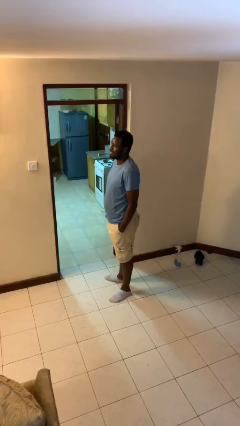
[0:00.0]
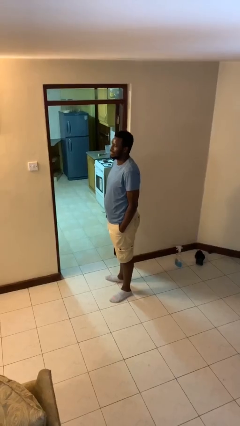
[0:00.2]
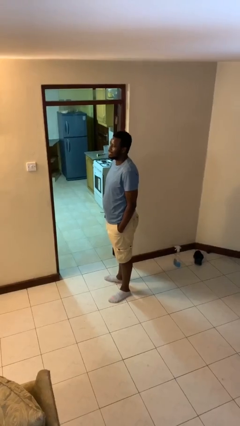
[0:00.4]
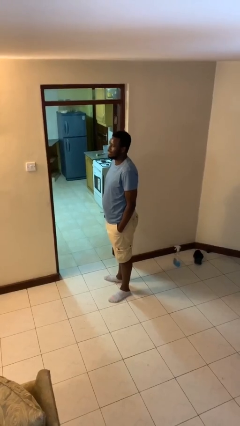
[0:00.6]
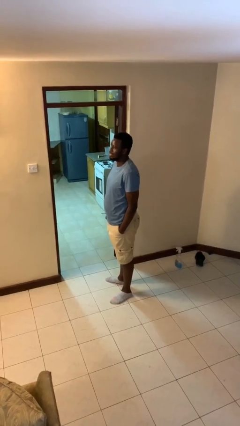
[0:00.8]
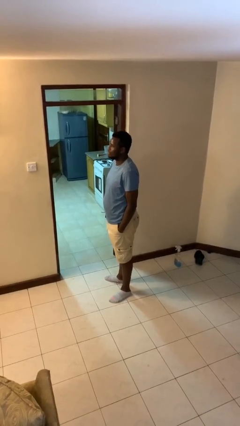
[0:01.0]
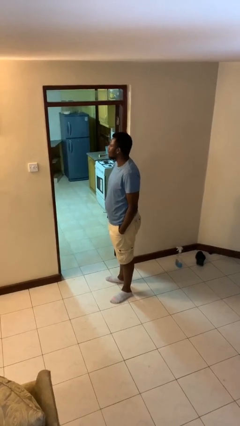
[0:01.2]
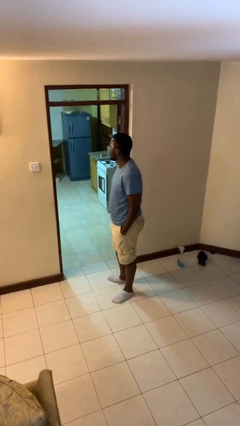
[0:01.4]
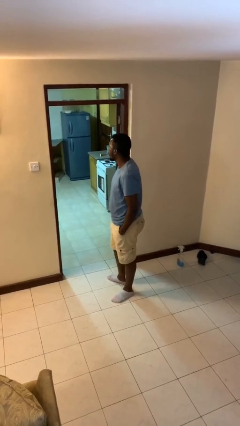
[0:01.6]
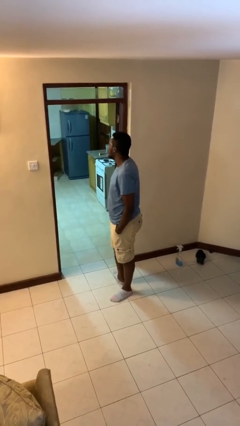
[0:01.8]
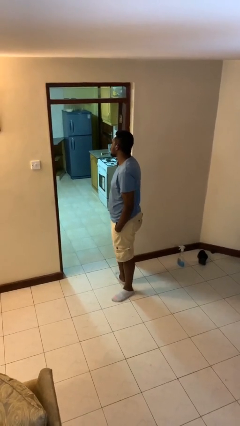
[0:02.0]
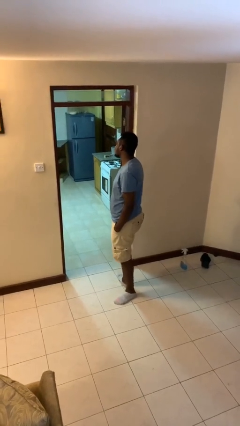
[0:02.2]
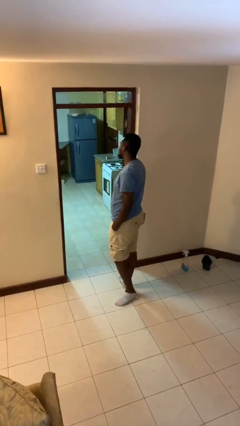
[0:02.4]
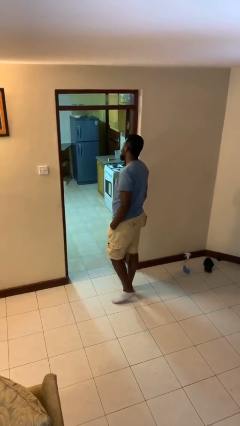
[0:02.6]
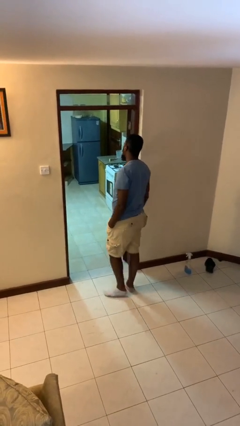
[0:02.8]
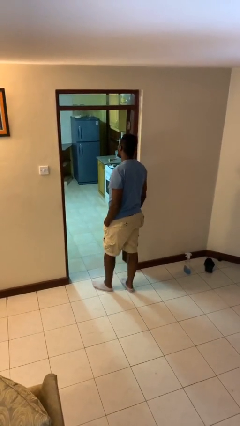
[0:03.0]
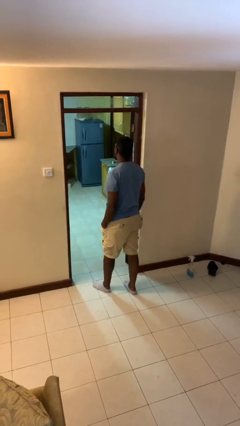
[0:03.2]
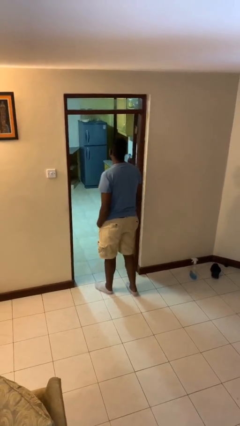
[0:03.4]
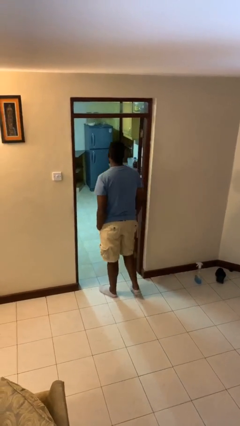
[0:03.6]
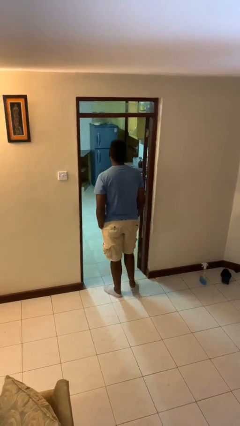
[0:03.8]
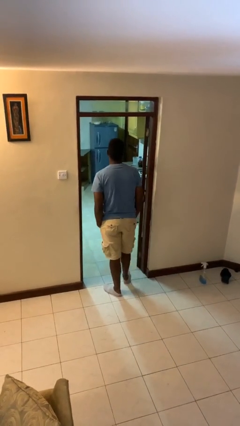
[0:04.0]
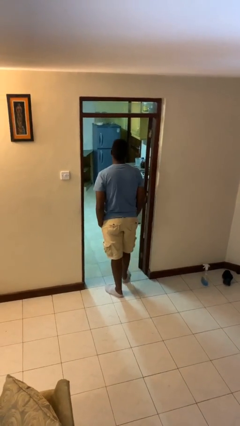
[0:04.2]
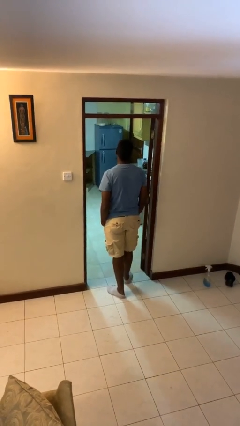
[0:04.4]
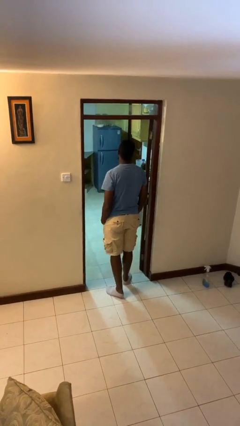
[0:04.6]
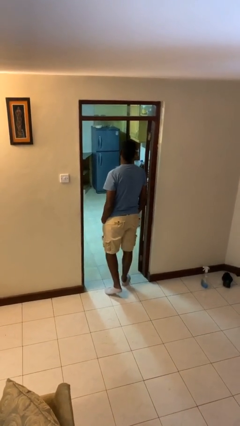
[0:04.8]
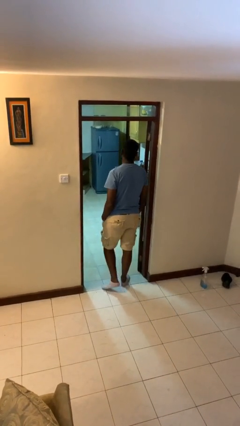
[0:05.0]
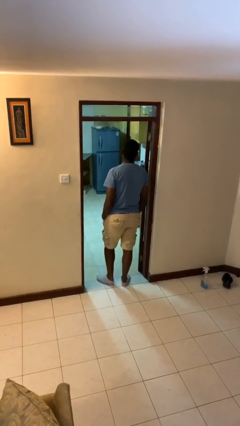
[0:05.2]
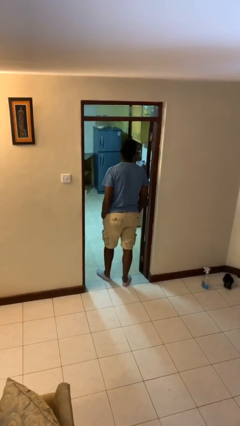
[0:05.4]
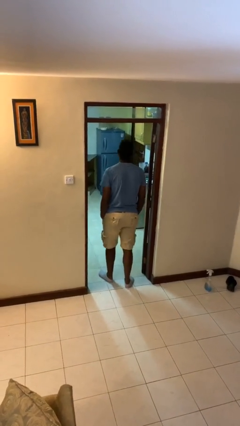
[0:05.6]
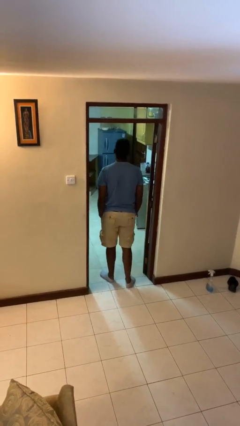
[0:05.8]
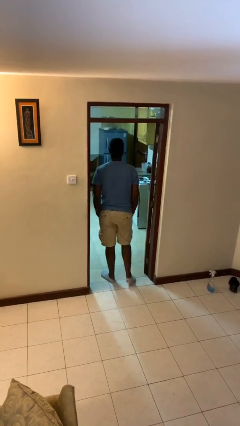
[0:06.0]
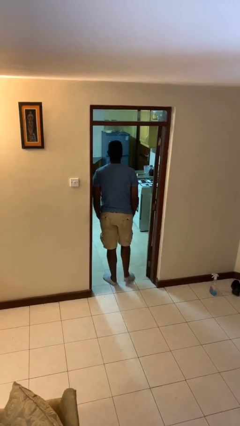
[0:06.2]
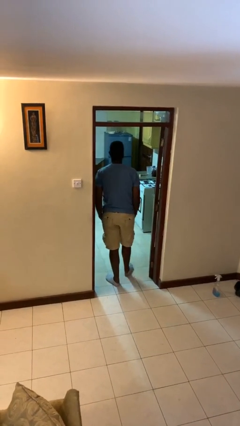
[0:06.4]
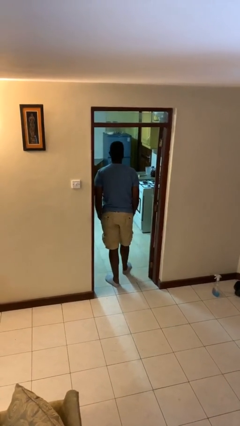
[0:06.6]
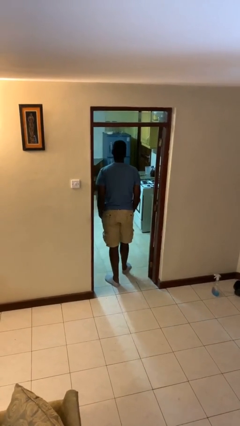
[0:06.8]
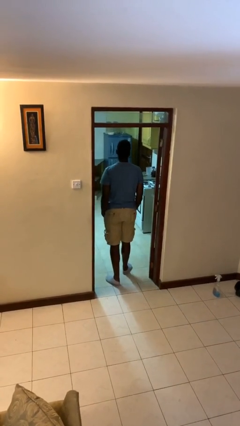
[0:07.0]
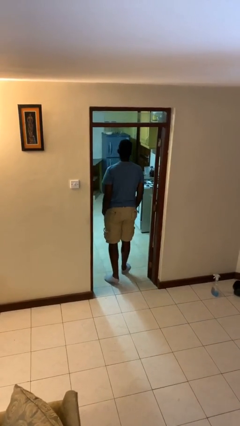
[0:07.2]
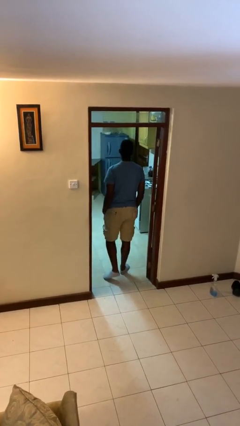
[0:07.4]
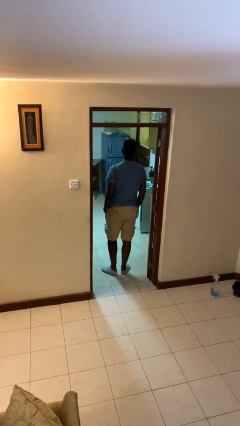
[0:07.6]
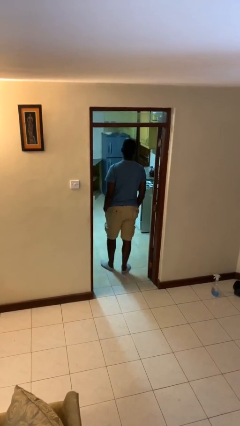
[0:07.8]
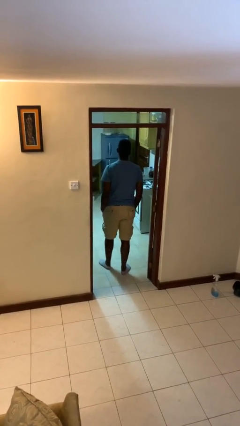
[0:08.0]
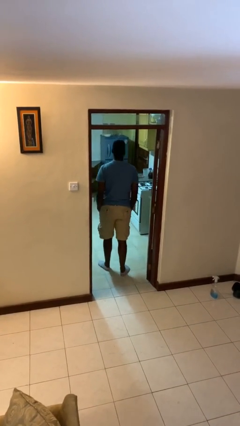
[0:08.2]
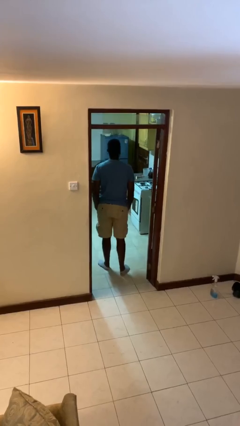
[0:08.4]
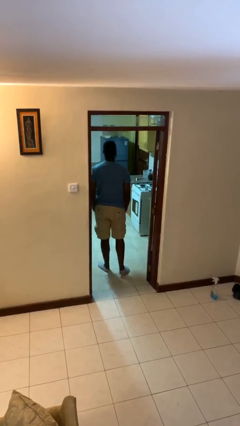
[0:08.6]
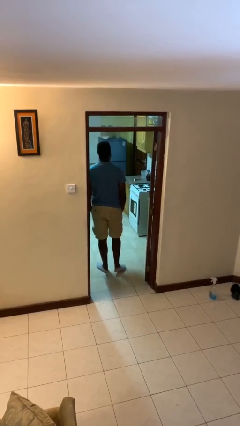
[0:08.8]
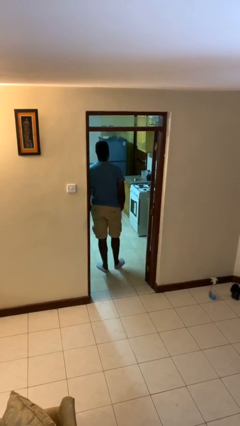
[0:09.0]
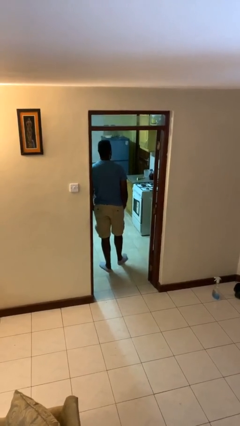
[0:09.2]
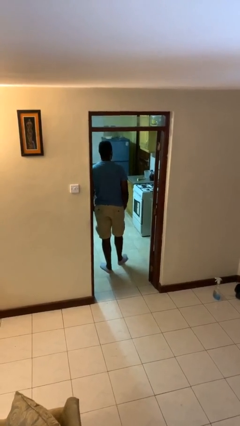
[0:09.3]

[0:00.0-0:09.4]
person exits scene through structure

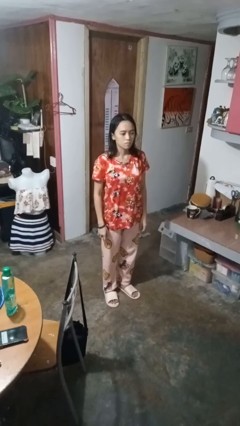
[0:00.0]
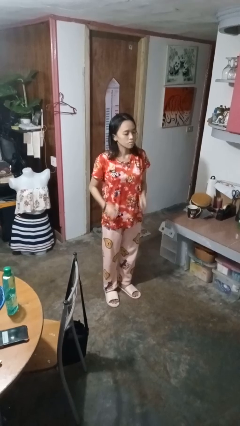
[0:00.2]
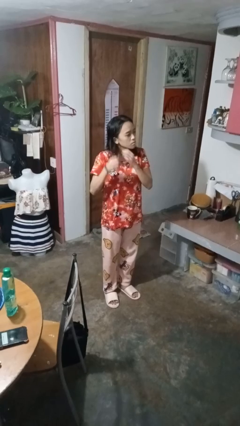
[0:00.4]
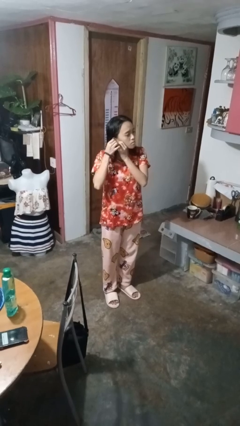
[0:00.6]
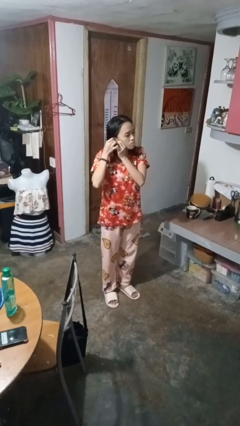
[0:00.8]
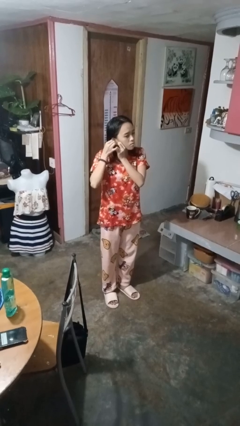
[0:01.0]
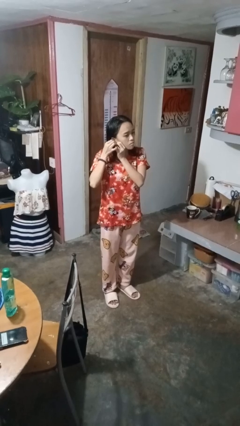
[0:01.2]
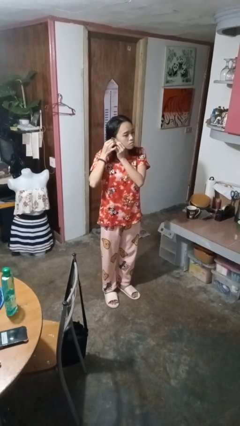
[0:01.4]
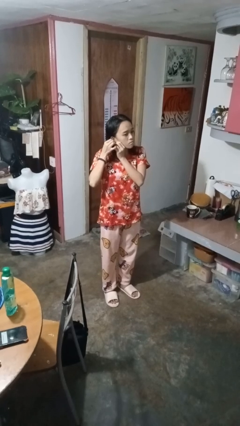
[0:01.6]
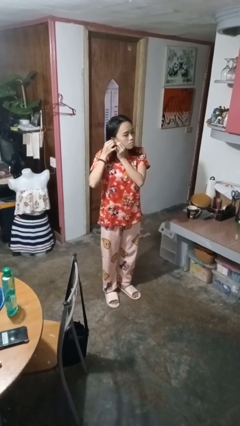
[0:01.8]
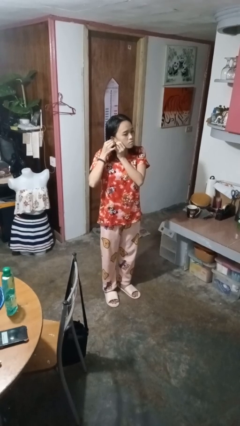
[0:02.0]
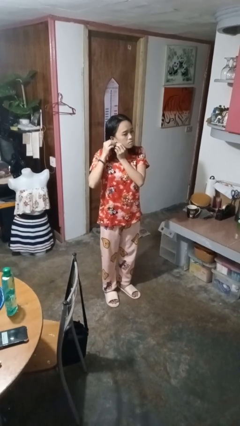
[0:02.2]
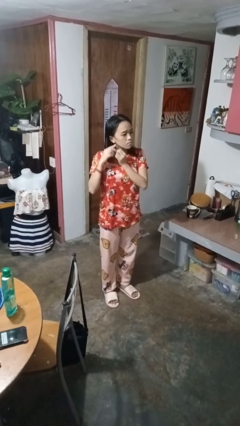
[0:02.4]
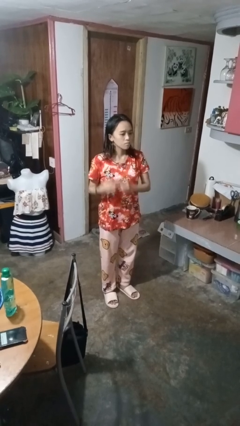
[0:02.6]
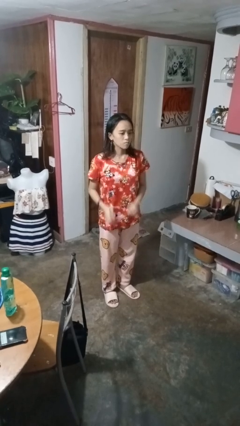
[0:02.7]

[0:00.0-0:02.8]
person puts on earrings

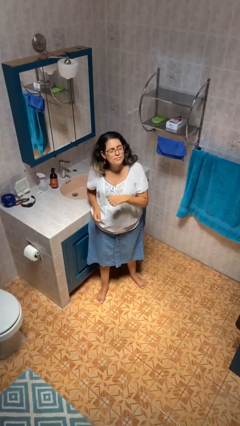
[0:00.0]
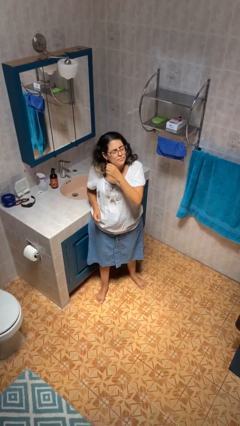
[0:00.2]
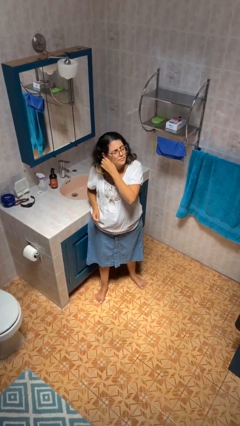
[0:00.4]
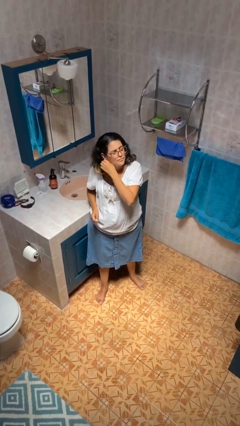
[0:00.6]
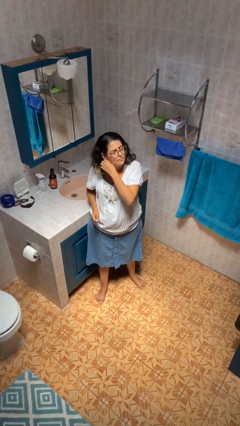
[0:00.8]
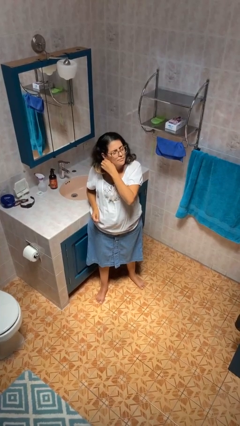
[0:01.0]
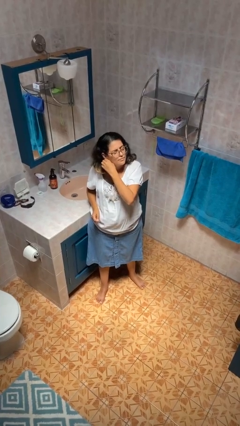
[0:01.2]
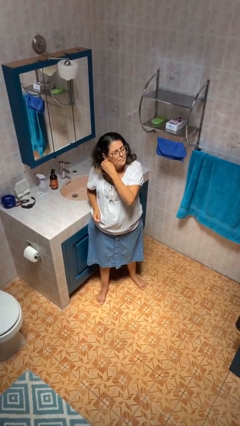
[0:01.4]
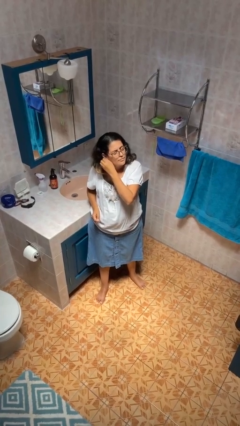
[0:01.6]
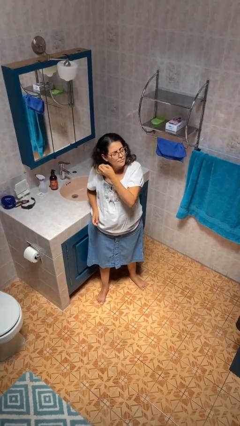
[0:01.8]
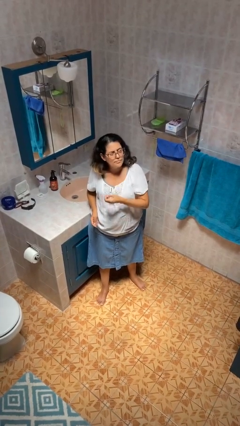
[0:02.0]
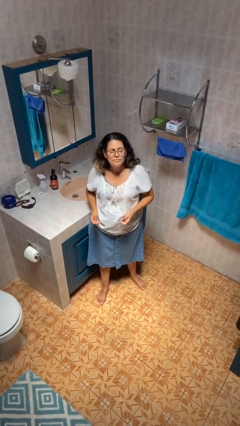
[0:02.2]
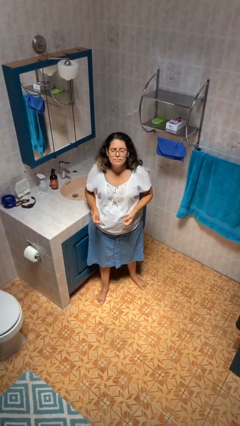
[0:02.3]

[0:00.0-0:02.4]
person takes off earrings

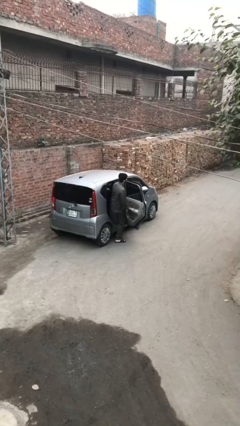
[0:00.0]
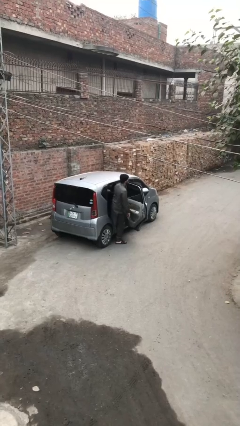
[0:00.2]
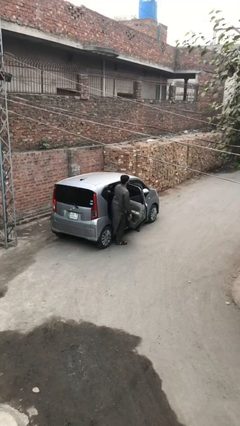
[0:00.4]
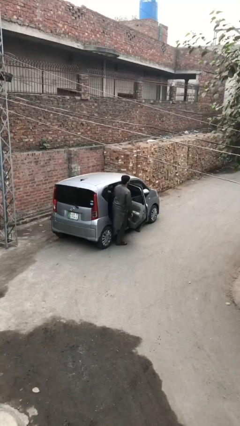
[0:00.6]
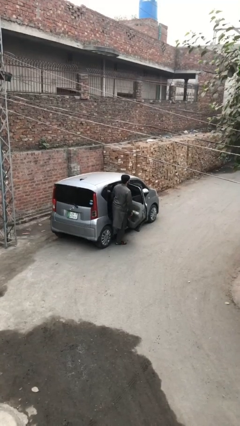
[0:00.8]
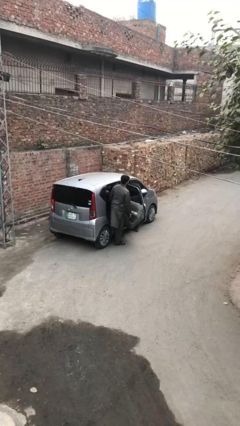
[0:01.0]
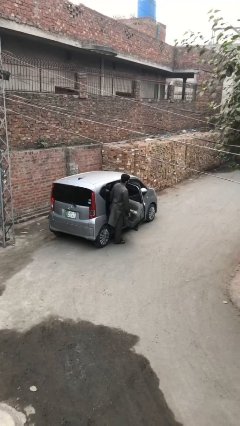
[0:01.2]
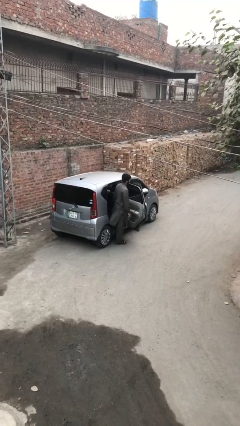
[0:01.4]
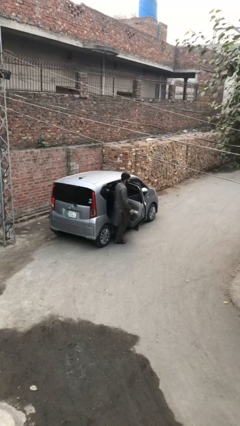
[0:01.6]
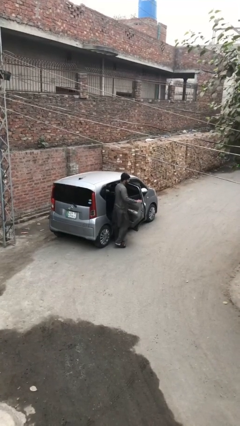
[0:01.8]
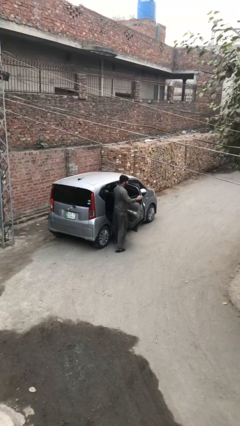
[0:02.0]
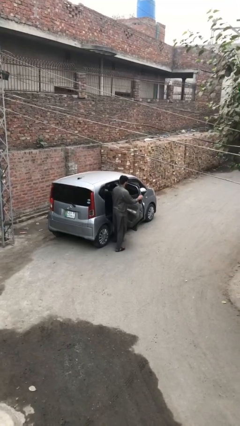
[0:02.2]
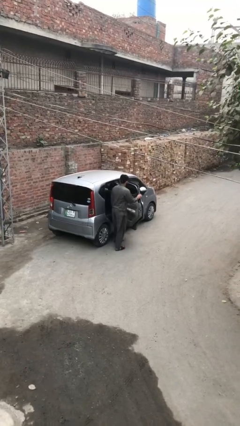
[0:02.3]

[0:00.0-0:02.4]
person exits car

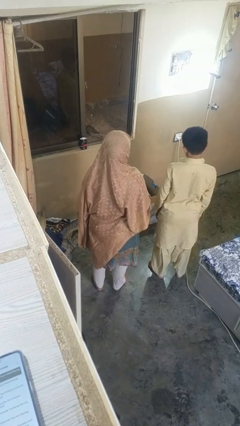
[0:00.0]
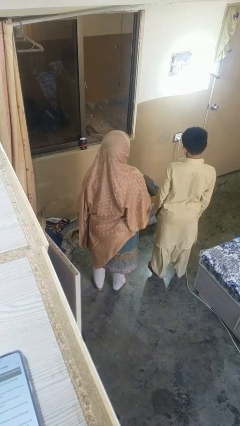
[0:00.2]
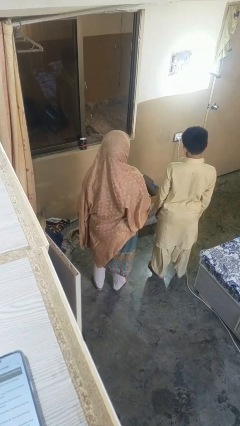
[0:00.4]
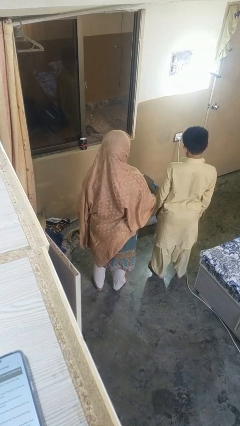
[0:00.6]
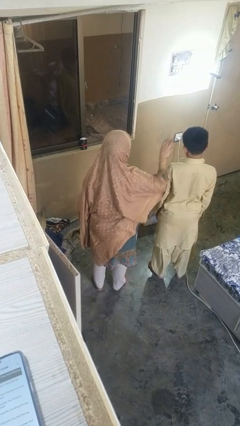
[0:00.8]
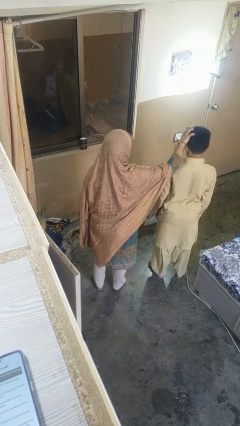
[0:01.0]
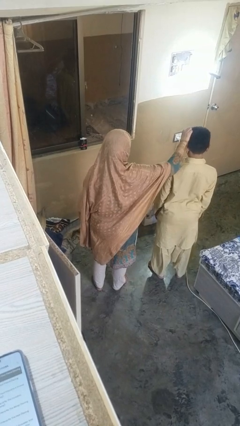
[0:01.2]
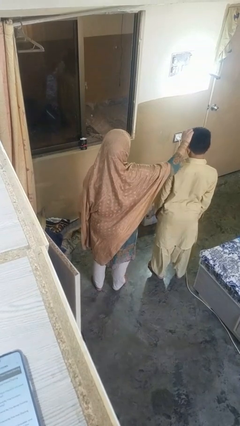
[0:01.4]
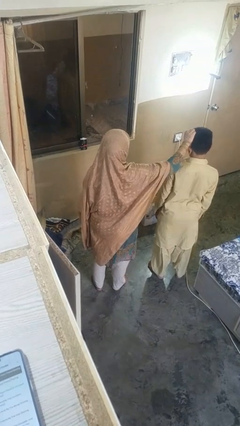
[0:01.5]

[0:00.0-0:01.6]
person grabs person by hair
